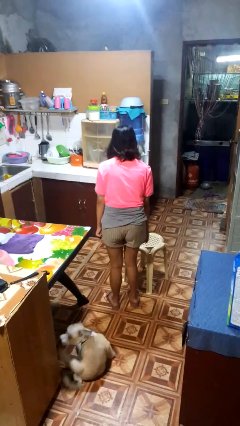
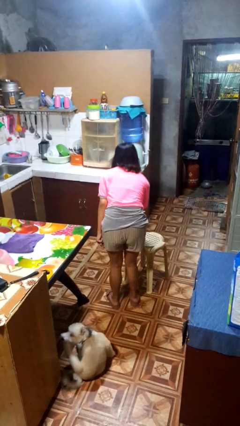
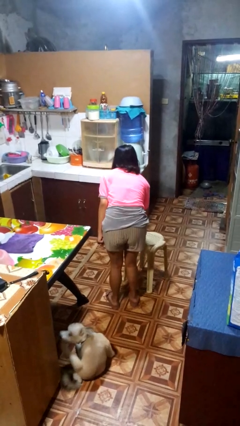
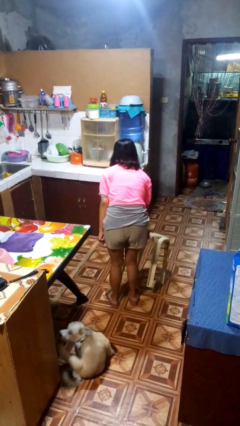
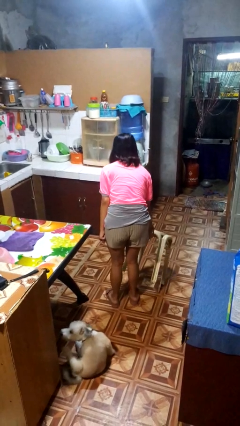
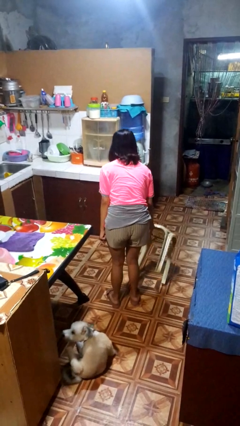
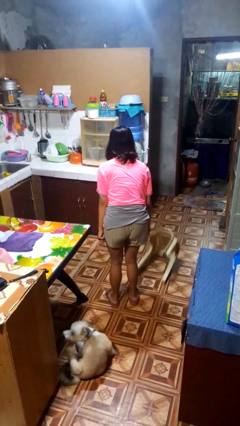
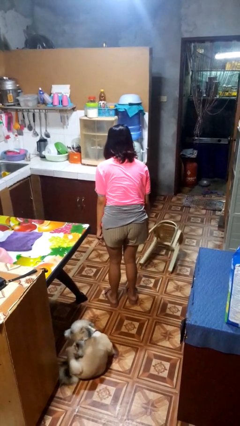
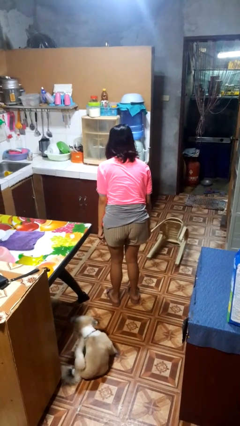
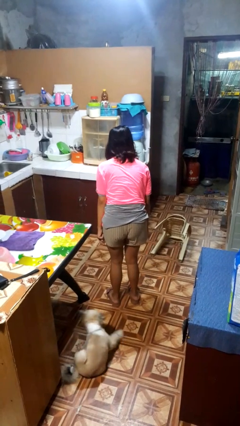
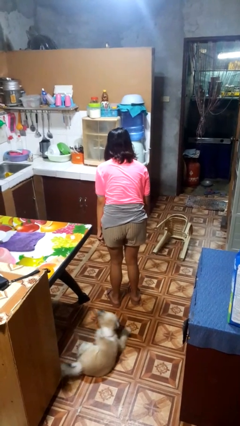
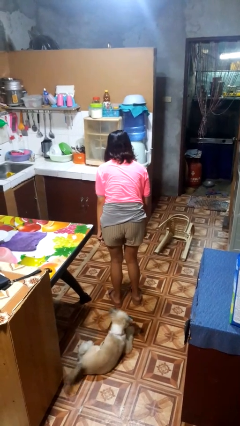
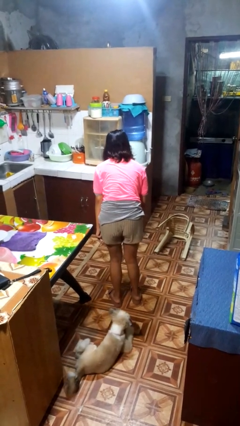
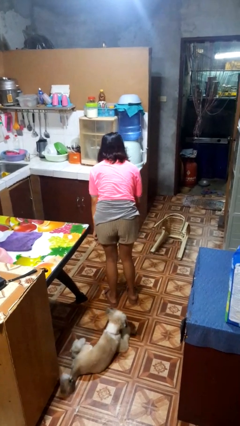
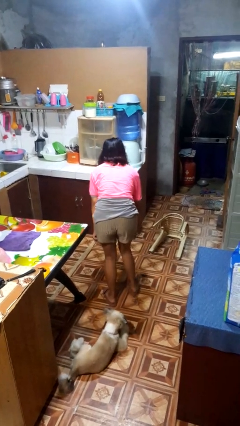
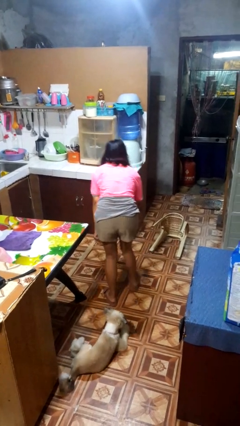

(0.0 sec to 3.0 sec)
person knocks over furniture

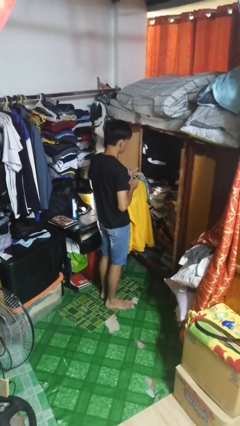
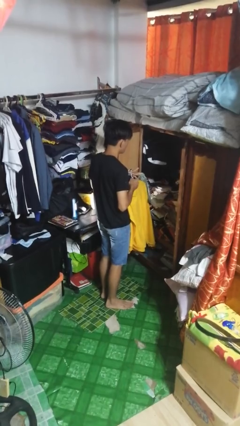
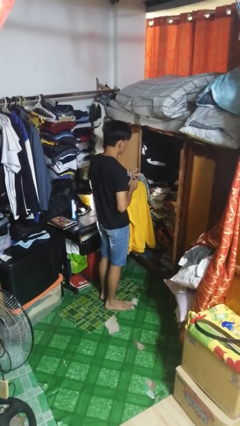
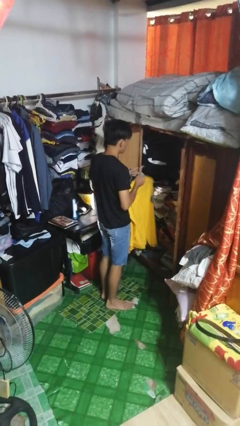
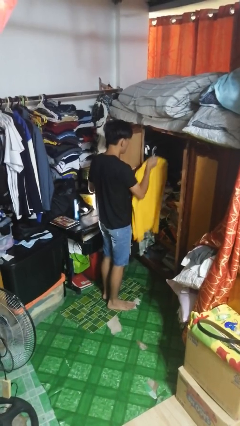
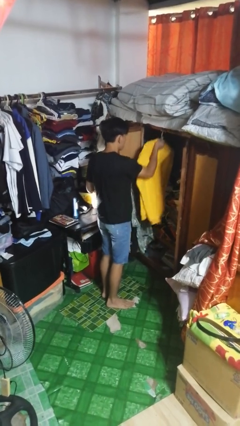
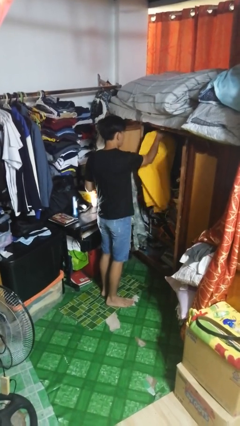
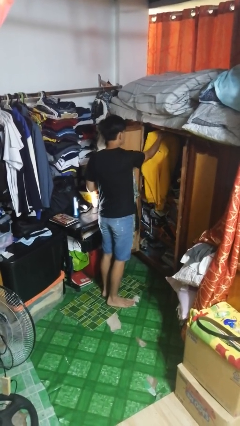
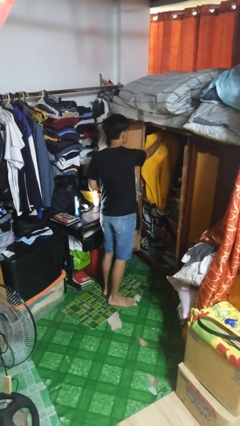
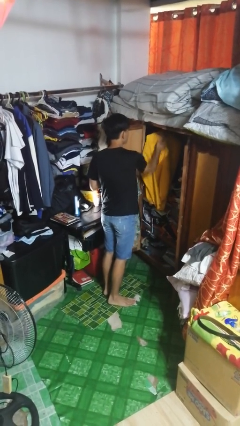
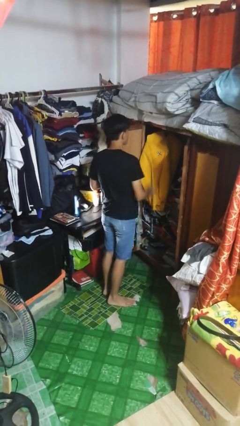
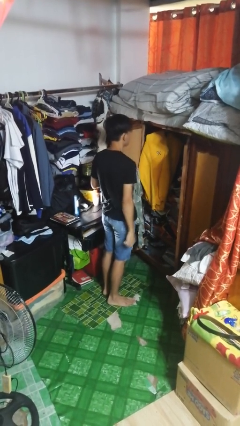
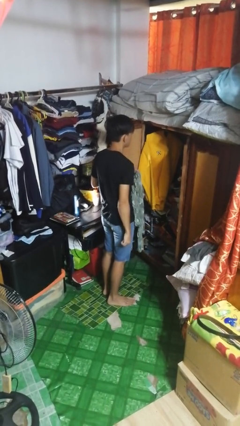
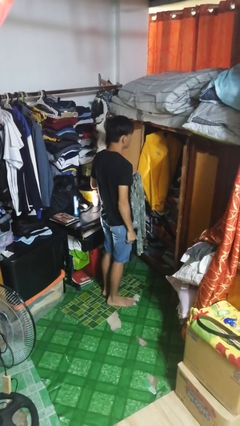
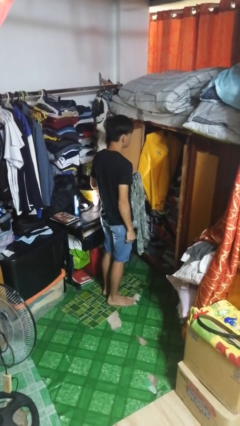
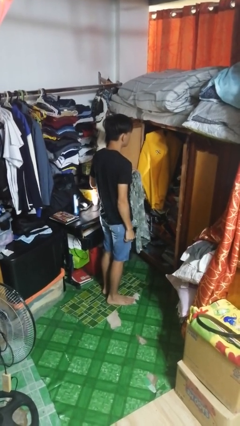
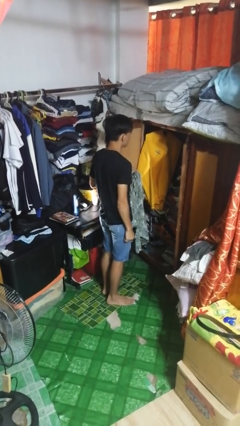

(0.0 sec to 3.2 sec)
person puts clothes into closet

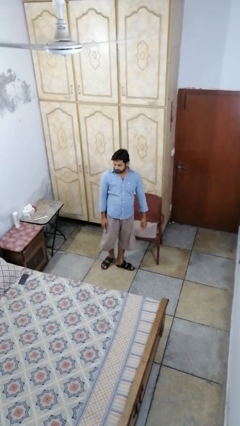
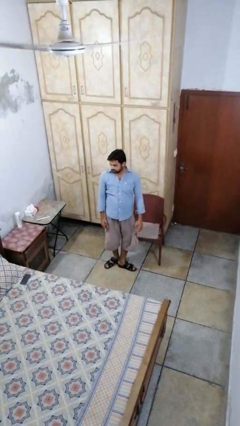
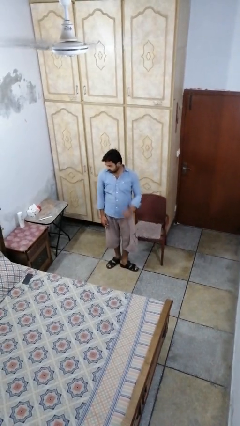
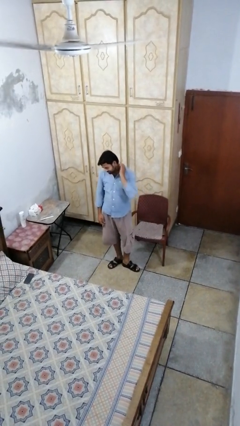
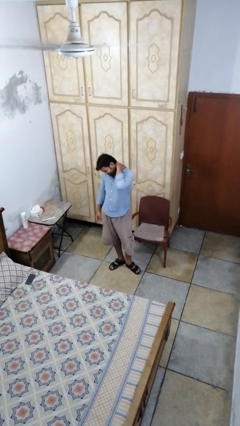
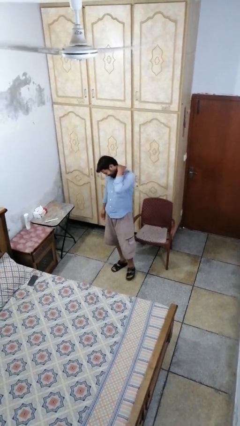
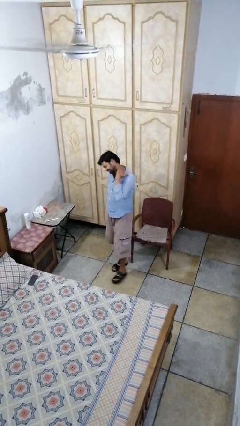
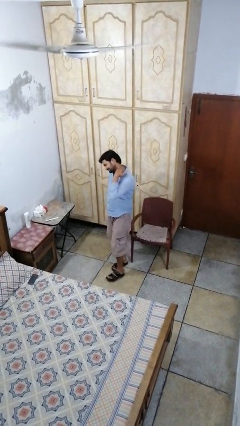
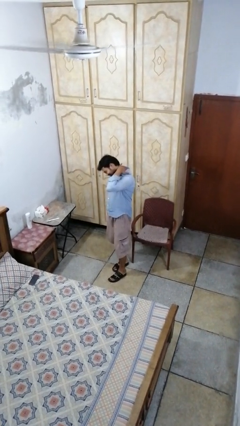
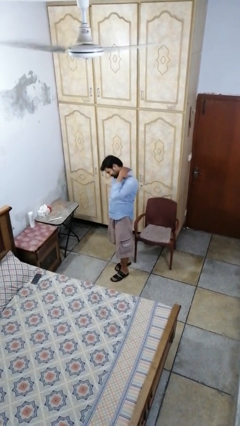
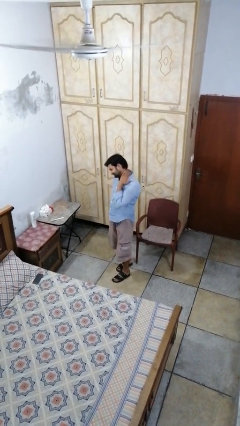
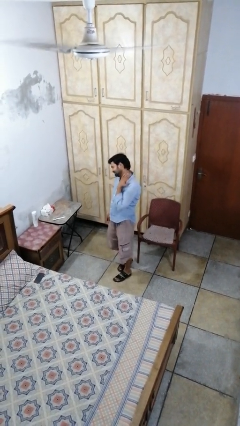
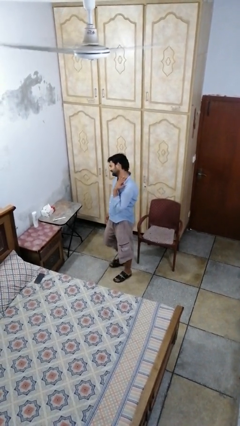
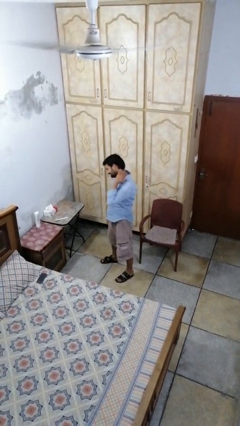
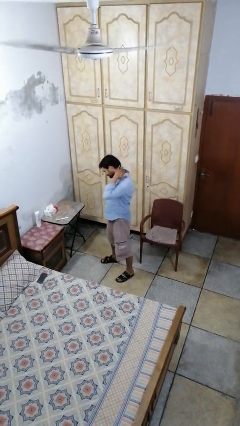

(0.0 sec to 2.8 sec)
person rubs neck

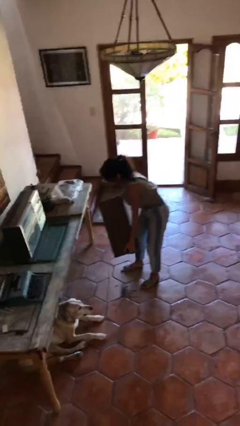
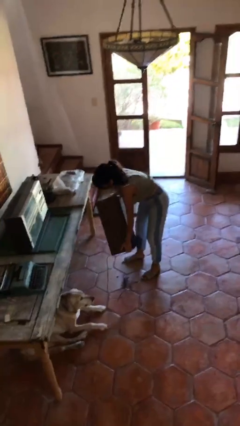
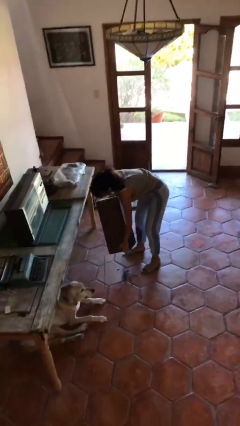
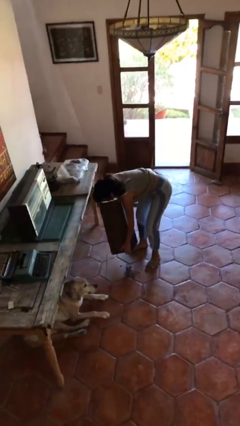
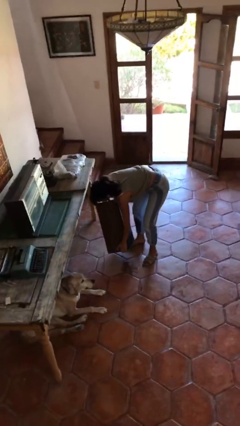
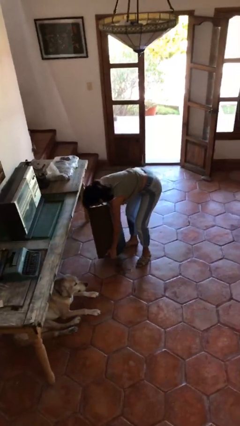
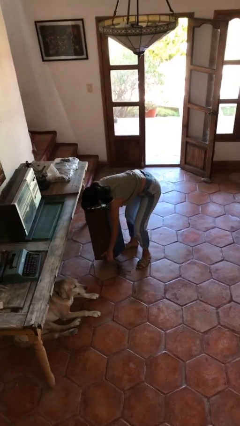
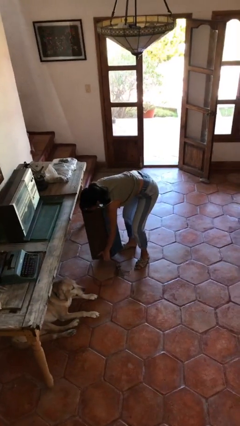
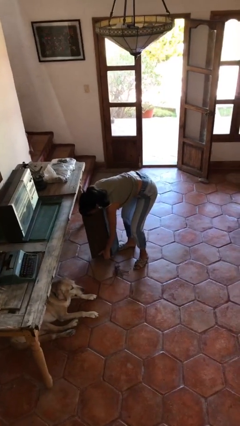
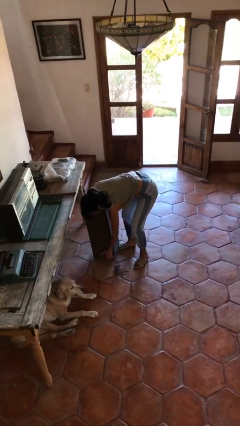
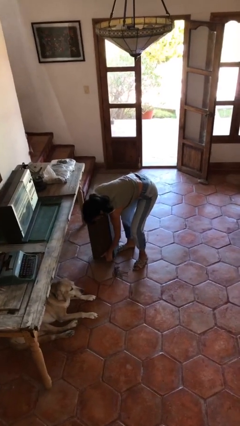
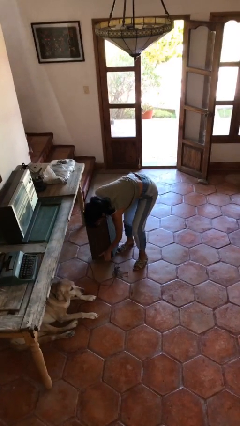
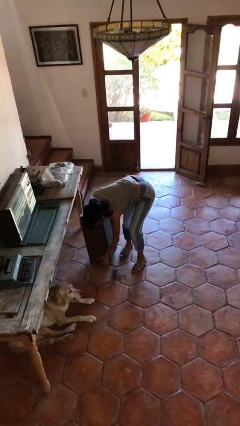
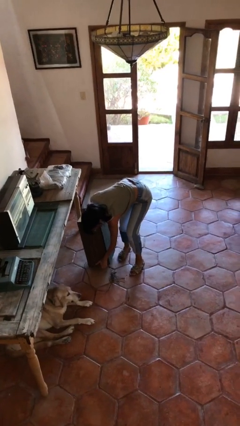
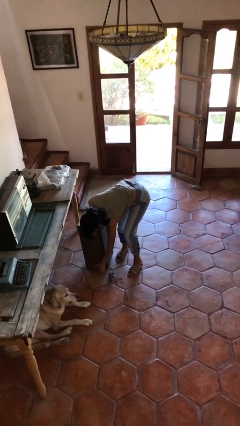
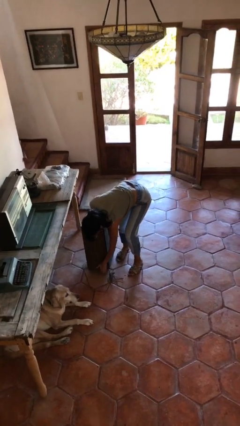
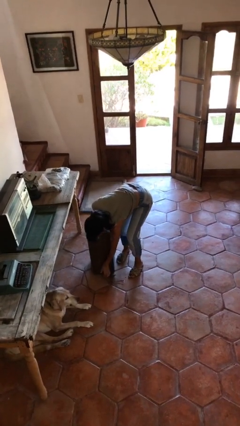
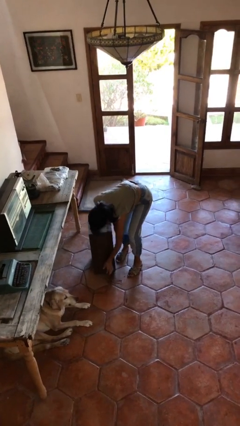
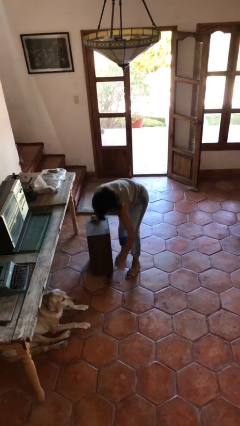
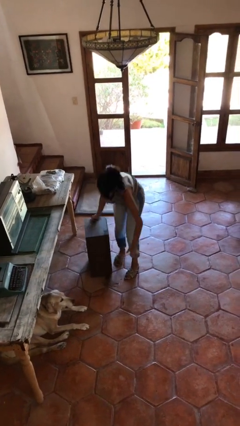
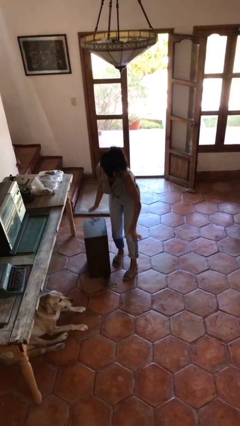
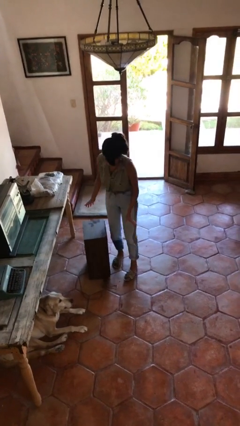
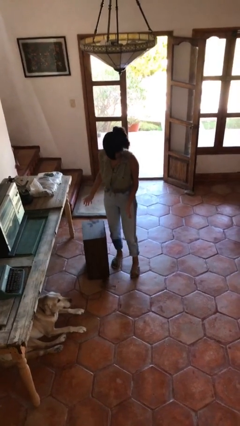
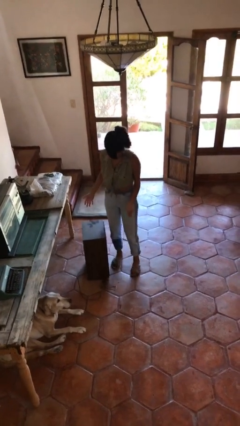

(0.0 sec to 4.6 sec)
person puts down object on floor

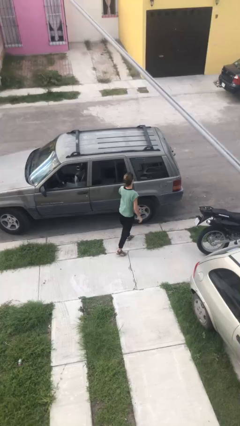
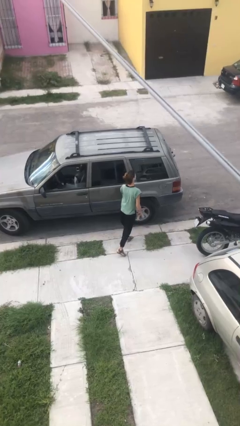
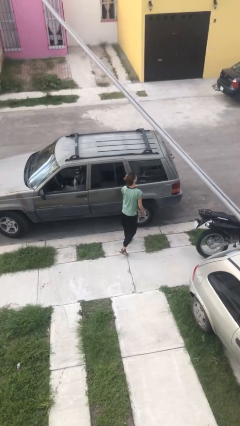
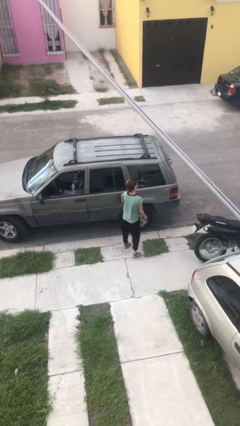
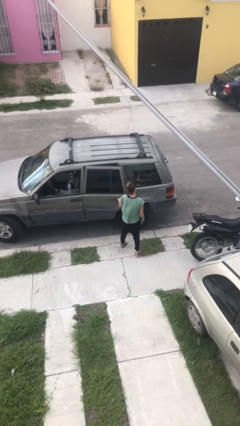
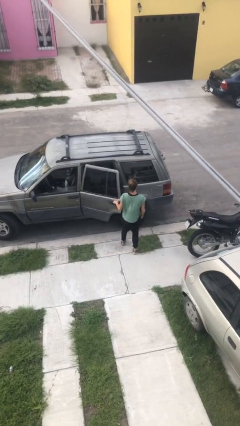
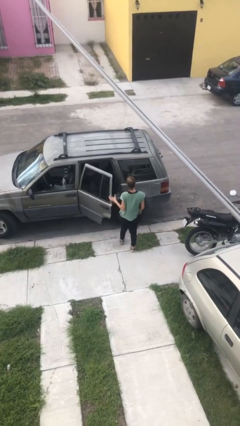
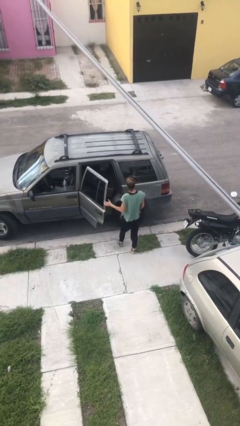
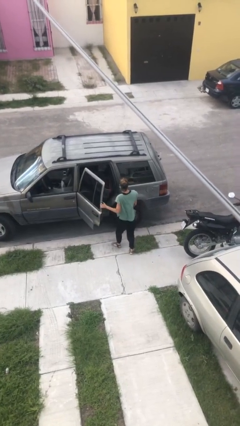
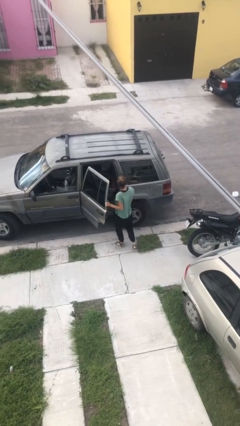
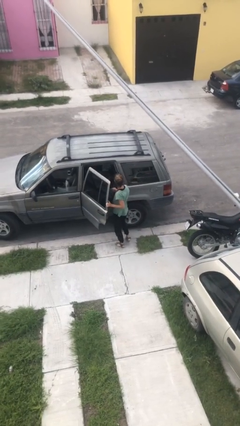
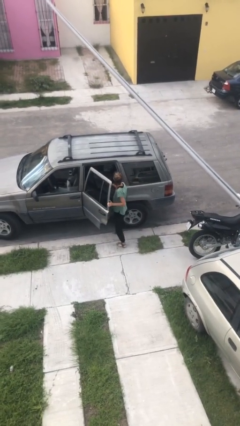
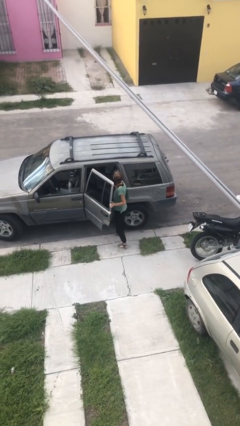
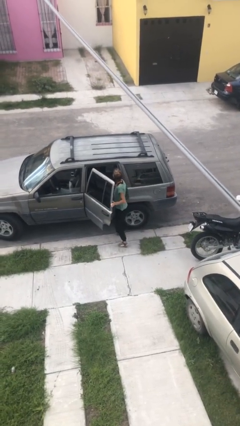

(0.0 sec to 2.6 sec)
person opens car door

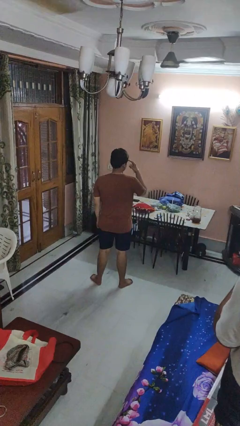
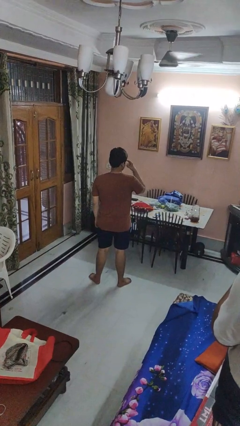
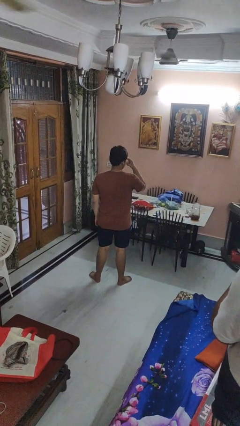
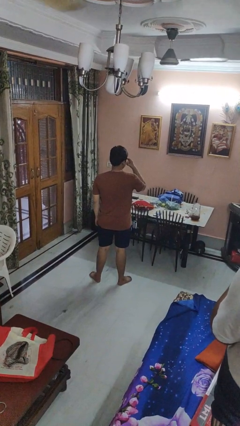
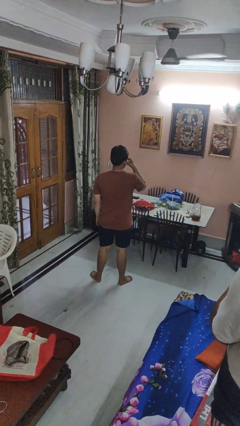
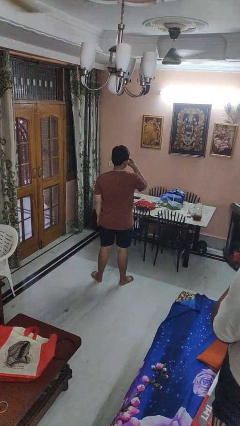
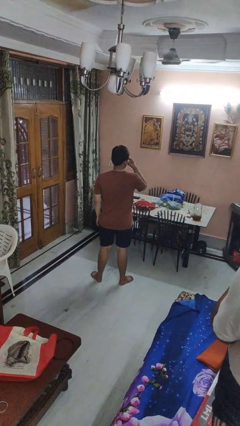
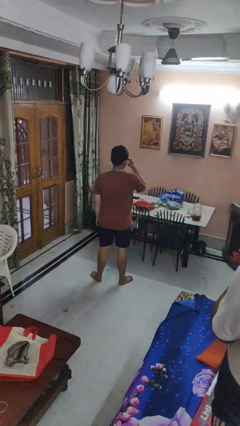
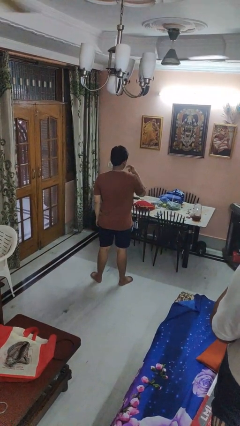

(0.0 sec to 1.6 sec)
person gestures watch closely
